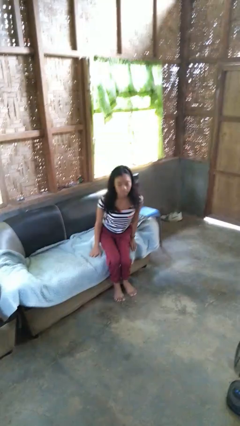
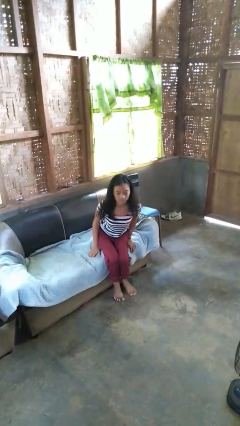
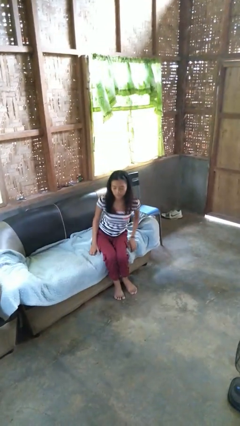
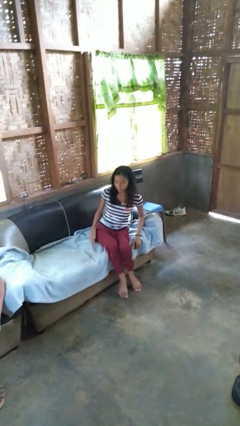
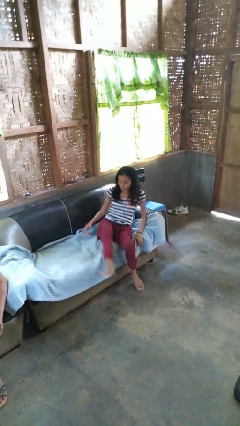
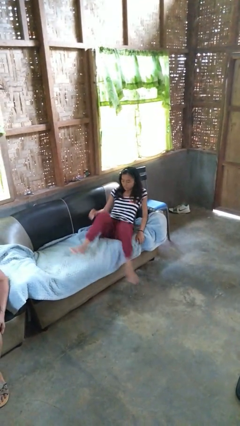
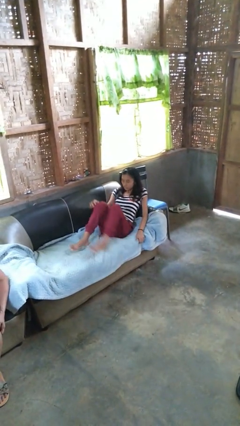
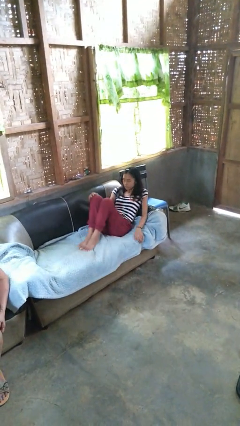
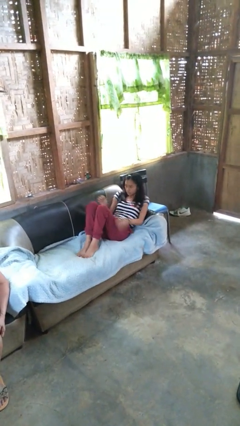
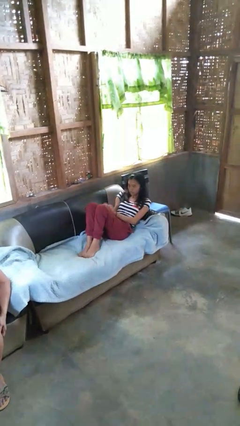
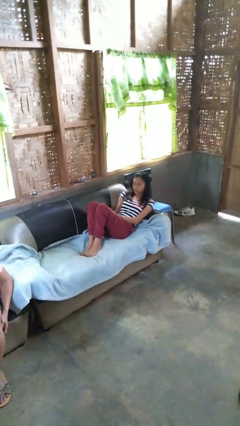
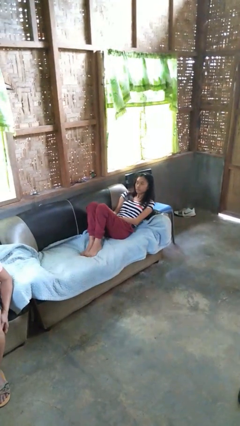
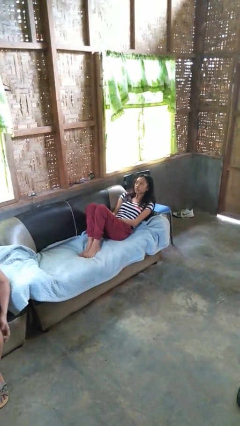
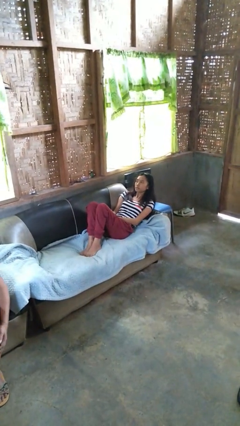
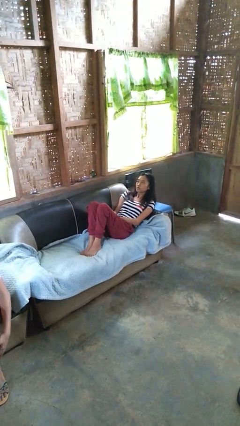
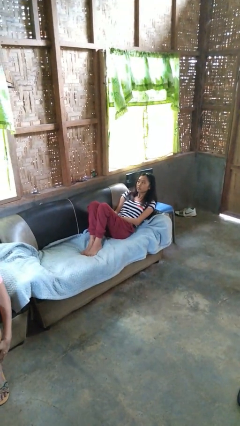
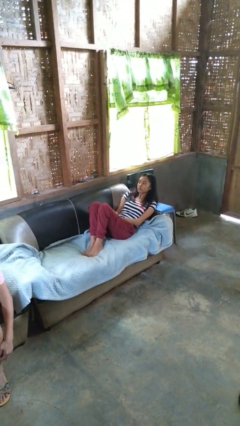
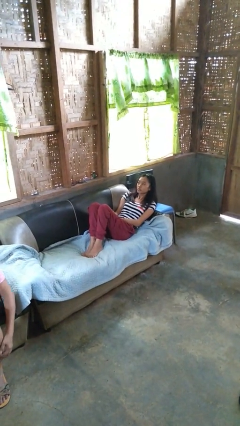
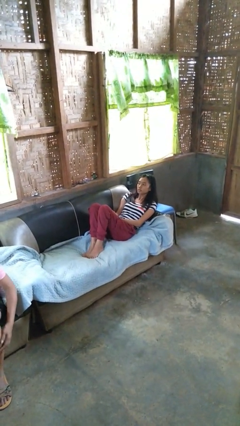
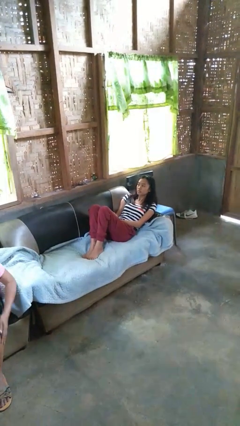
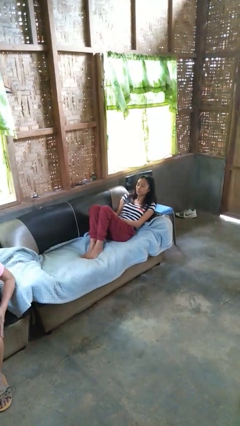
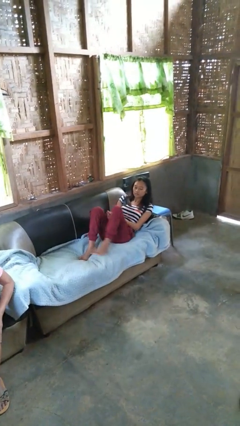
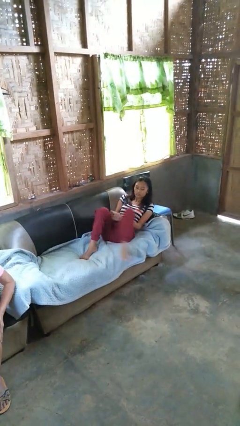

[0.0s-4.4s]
person lies down on couch

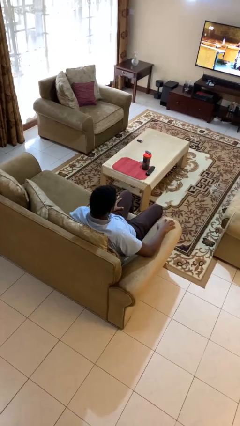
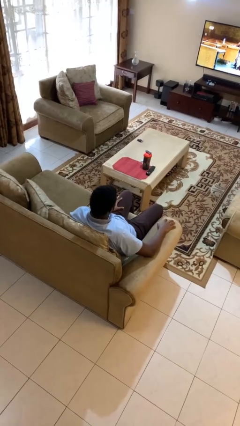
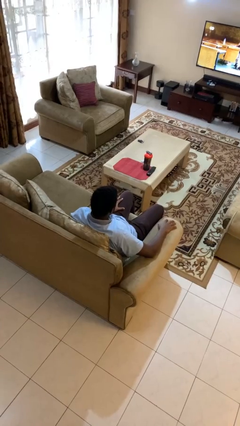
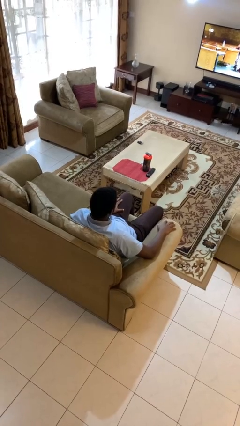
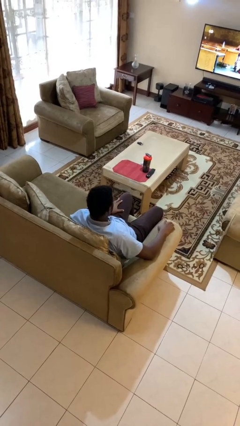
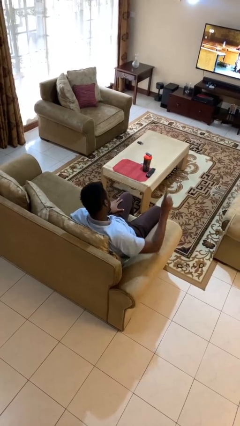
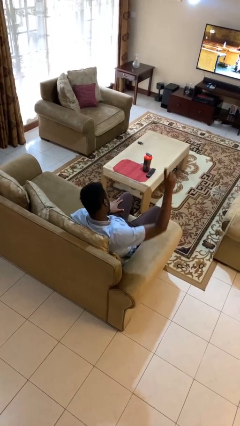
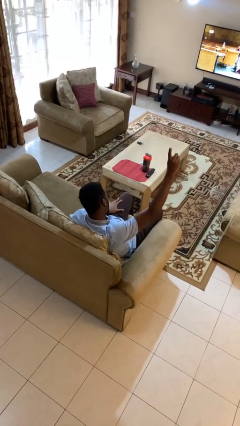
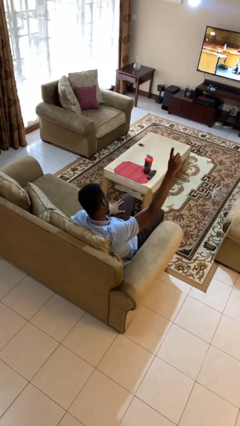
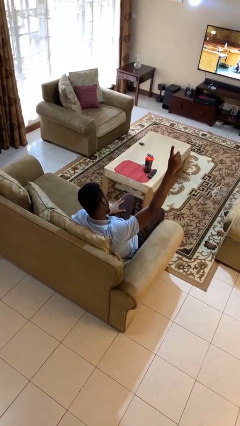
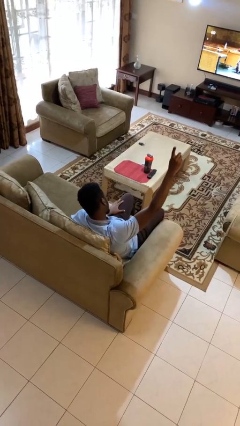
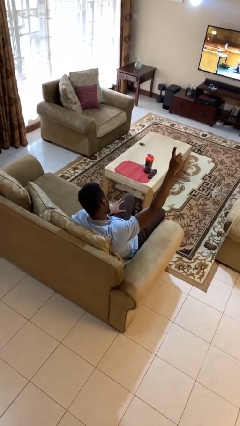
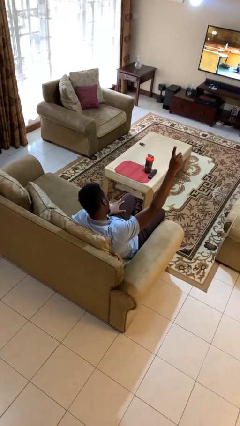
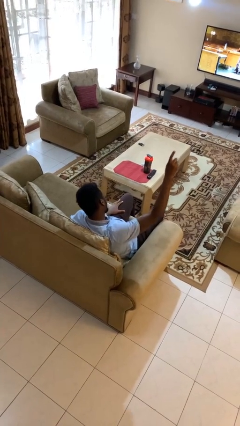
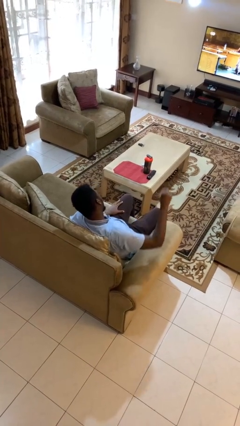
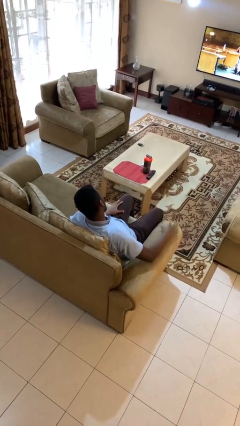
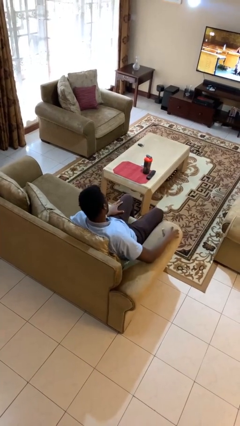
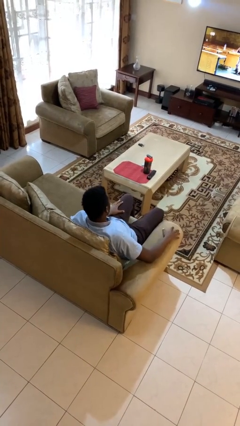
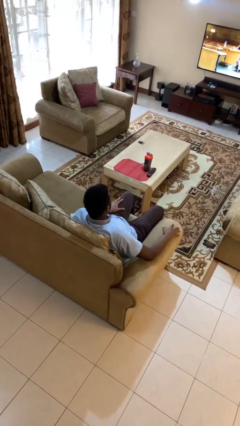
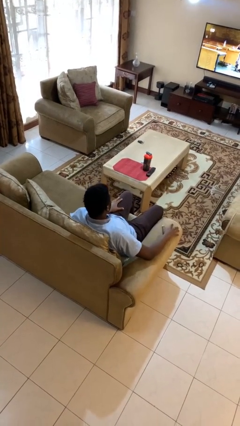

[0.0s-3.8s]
person gestures number one

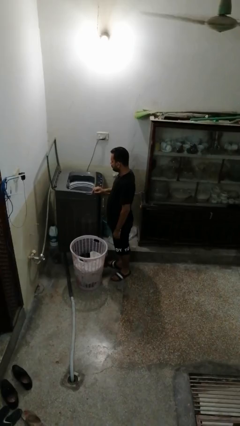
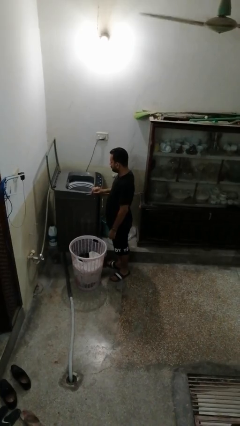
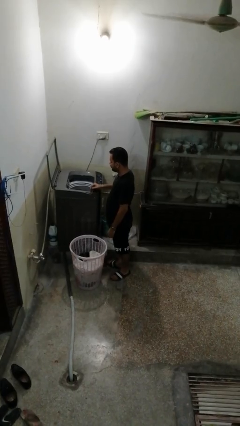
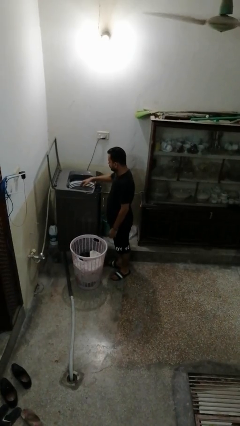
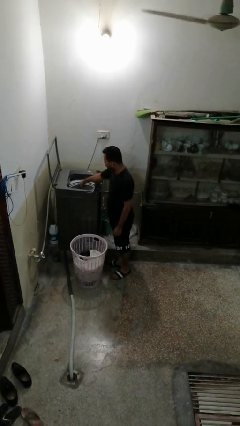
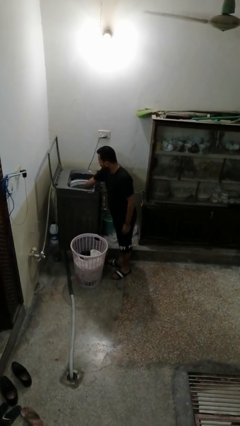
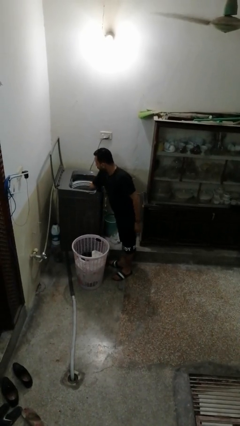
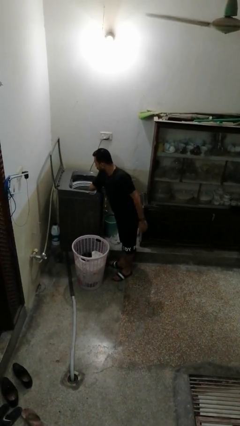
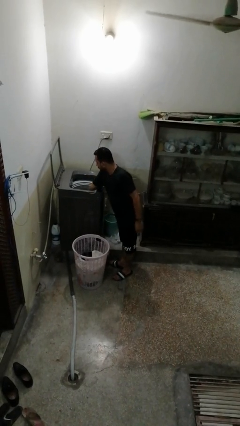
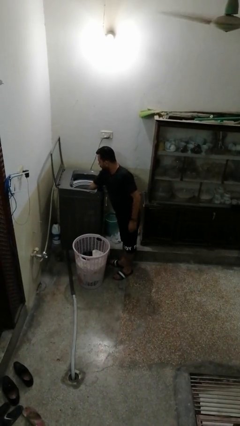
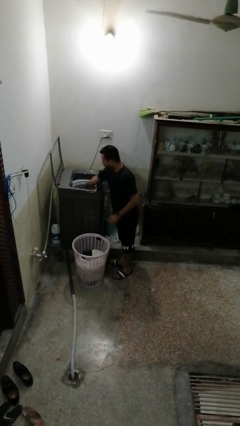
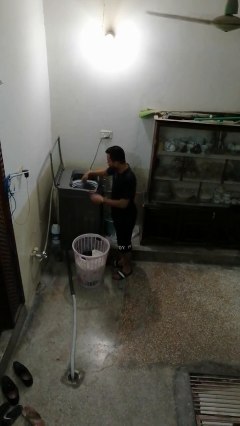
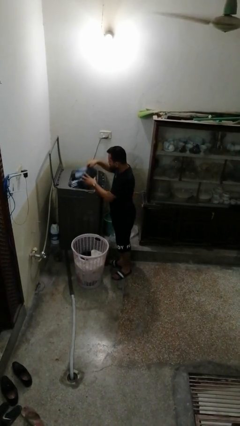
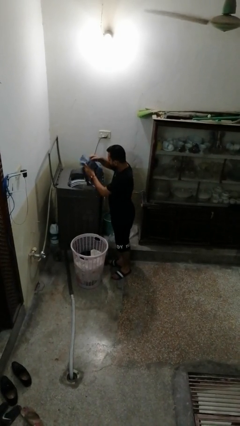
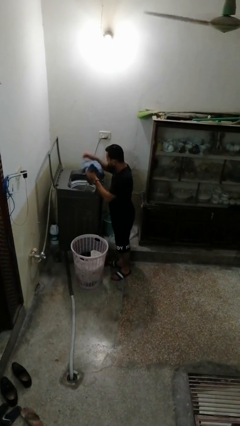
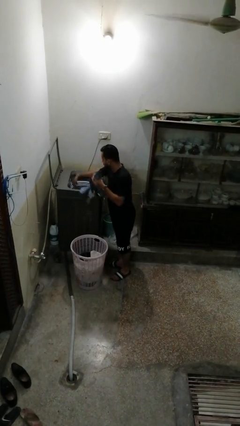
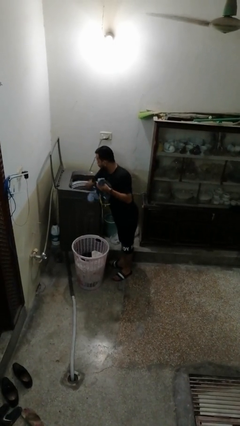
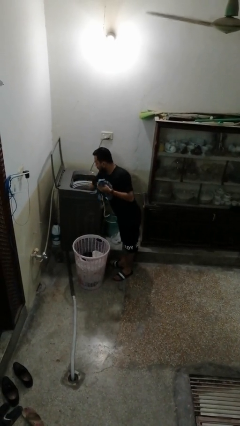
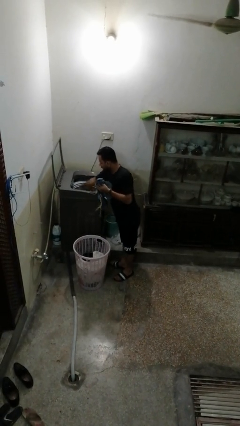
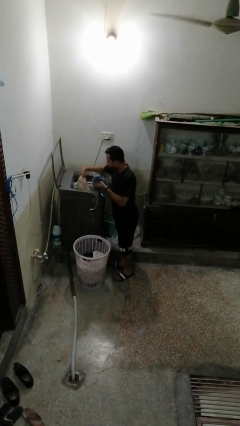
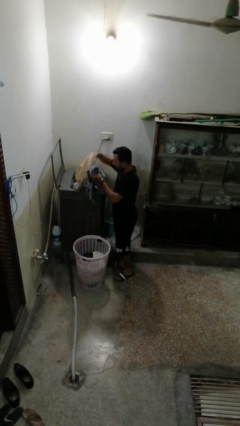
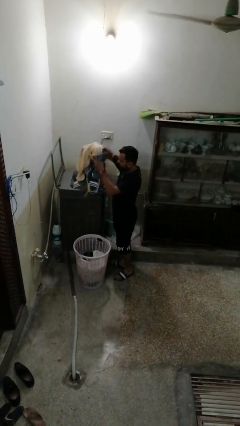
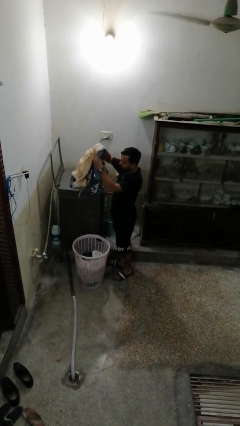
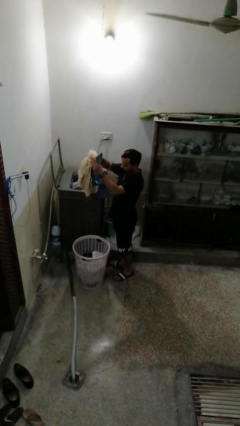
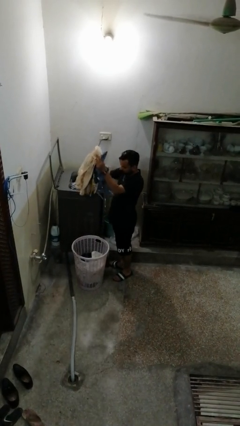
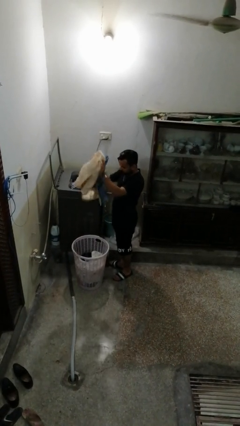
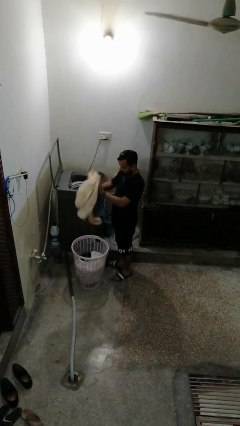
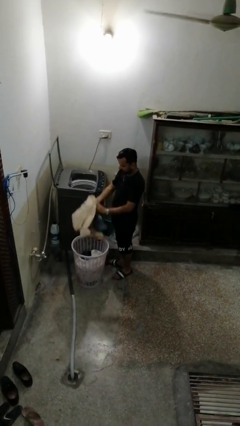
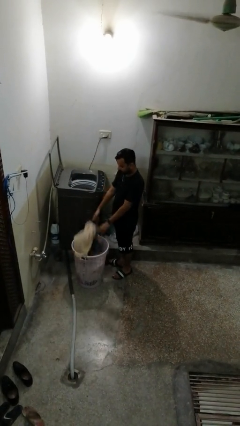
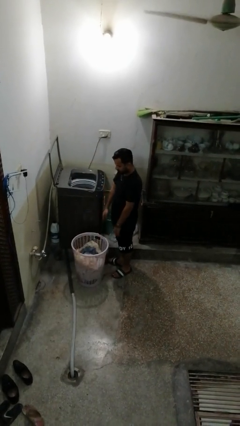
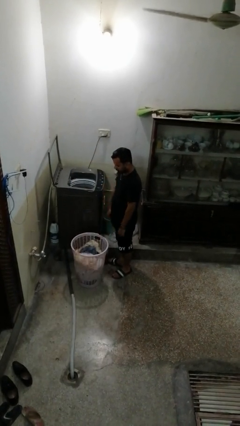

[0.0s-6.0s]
person unloads dryer

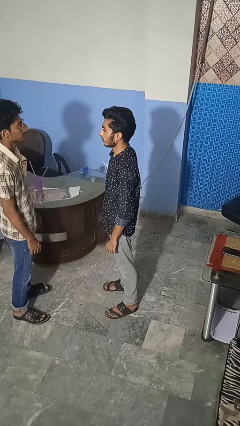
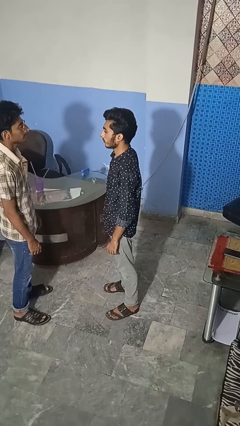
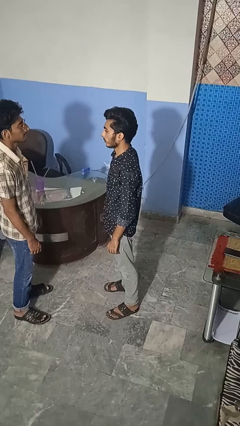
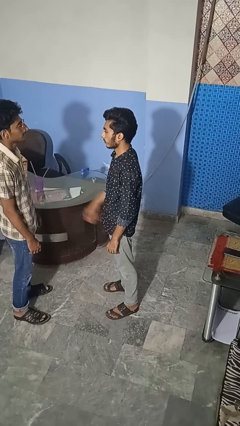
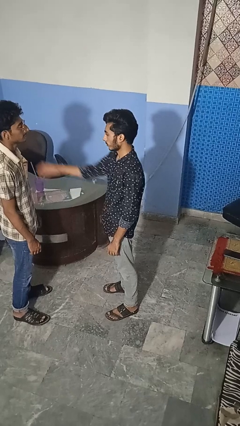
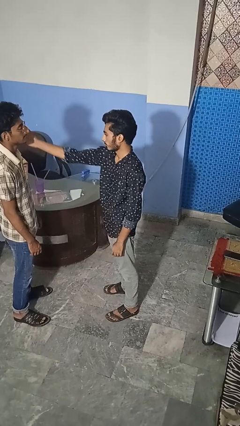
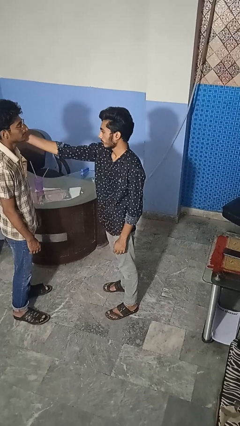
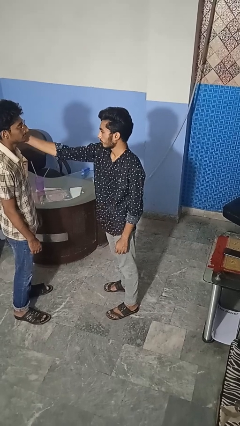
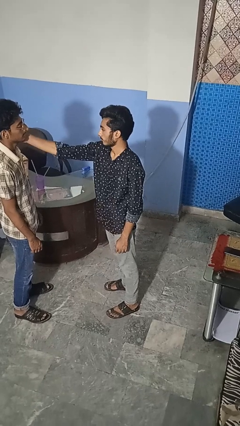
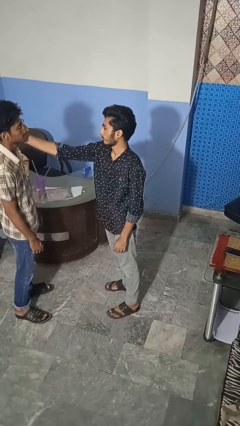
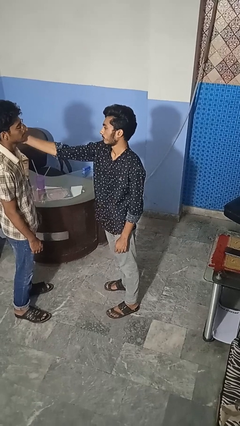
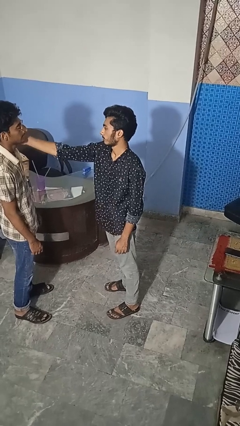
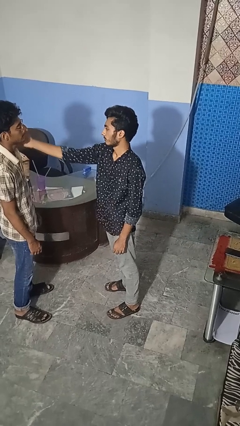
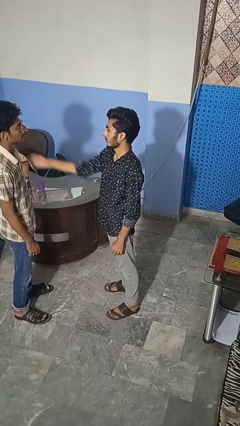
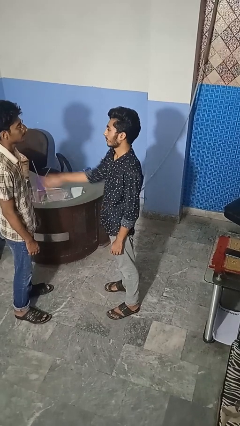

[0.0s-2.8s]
person touches face of person

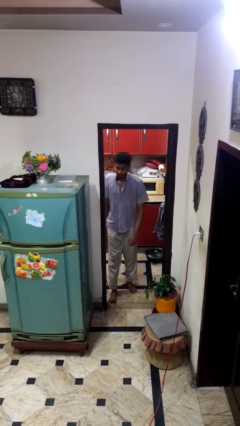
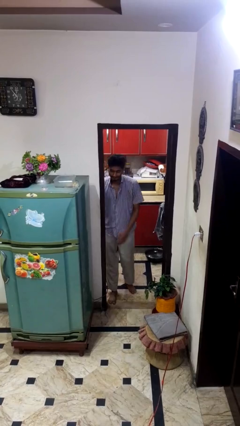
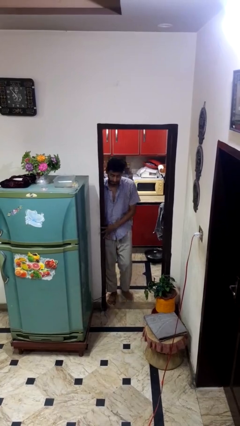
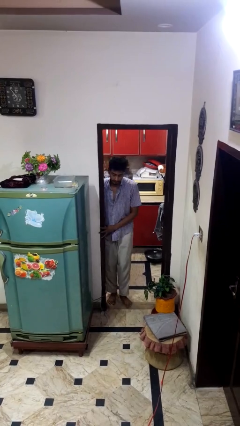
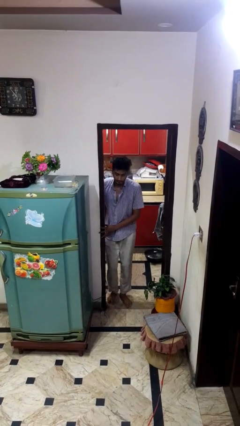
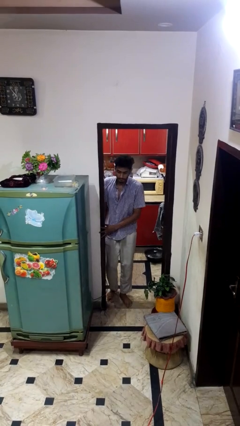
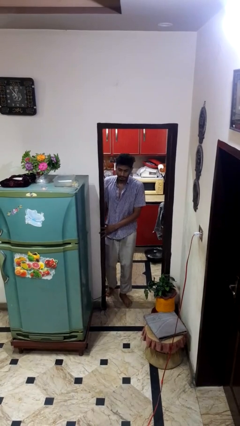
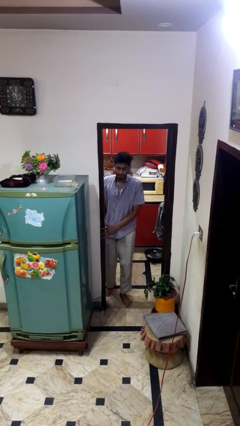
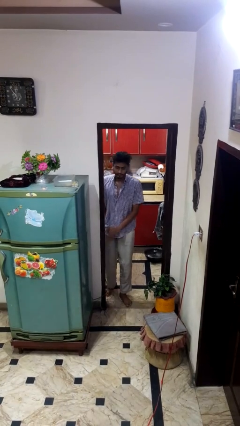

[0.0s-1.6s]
person bumps into wall
